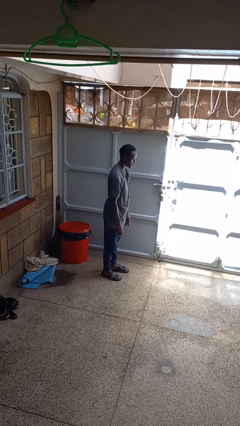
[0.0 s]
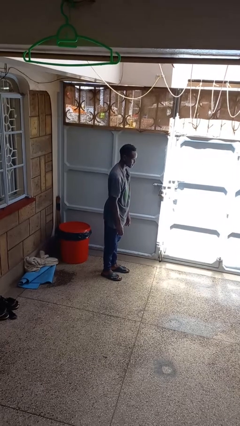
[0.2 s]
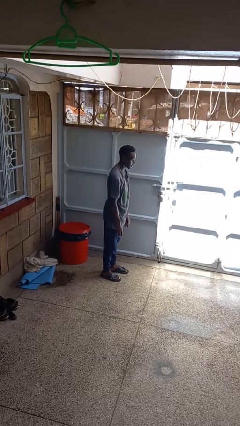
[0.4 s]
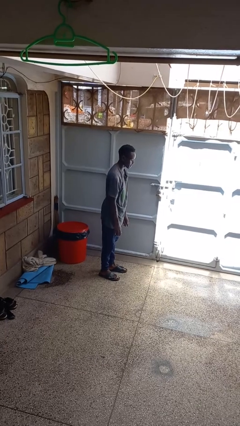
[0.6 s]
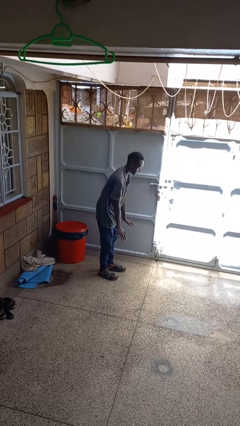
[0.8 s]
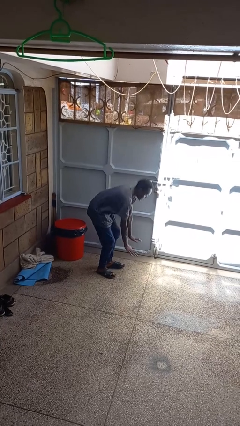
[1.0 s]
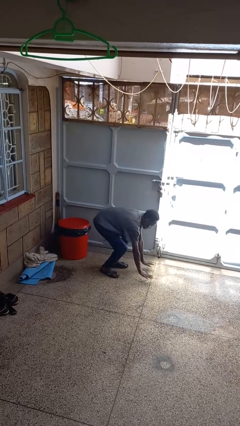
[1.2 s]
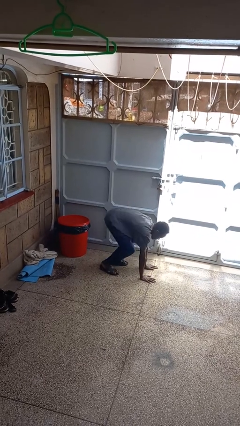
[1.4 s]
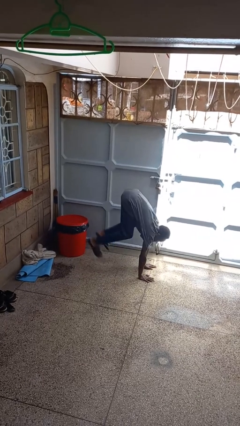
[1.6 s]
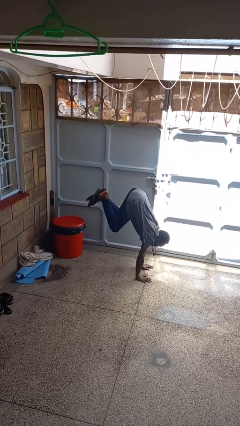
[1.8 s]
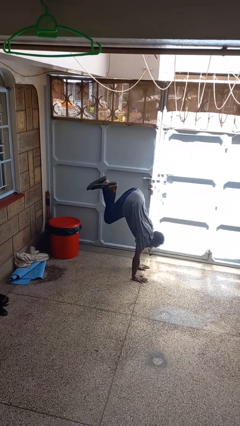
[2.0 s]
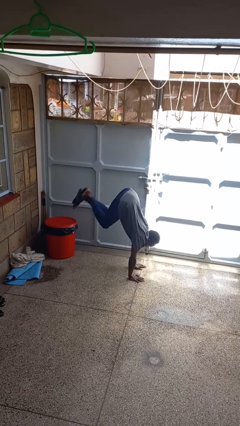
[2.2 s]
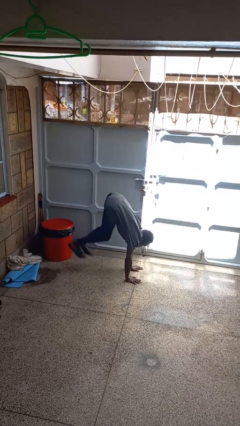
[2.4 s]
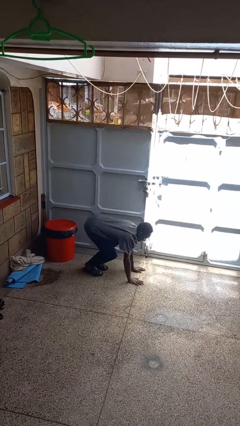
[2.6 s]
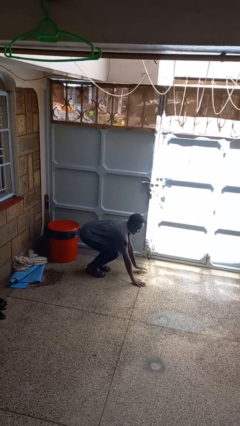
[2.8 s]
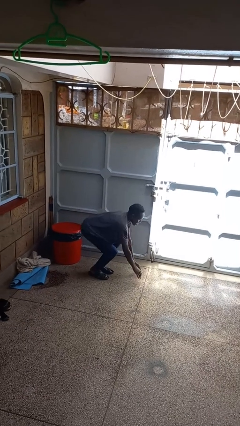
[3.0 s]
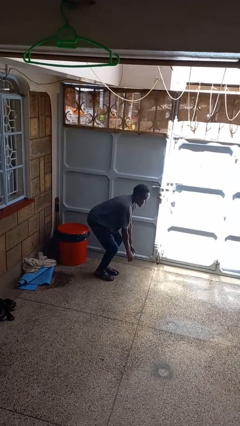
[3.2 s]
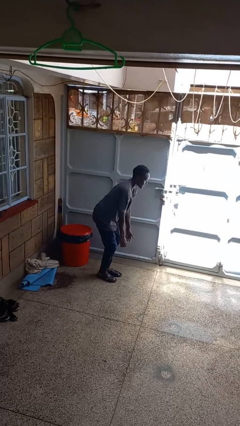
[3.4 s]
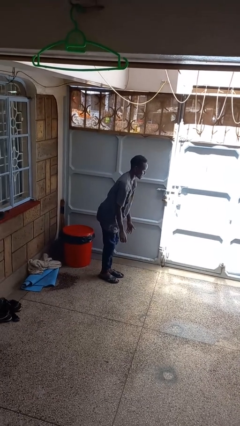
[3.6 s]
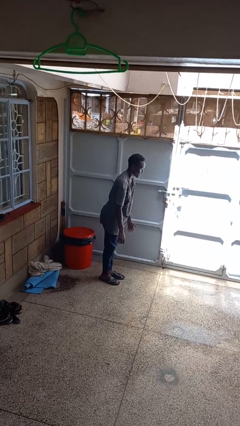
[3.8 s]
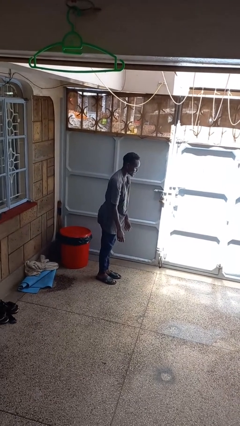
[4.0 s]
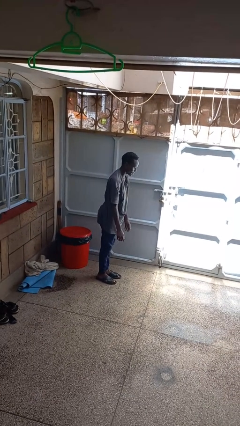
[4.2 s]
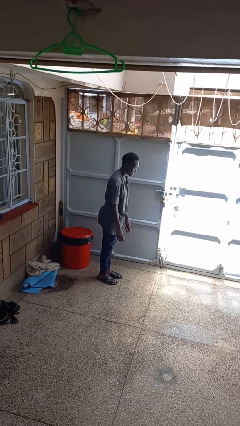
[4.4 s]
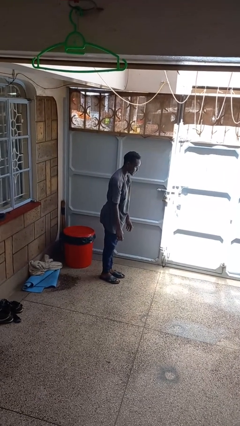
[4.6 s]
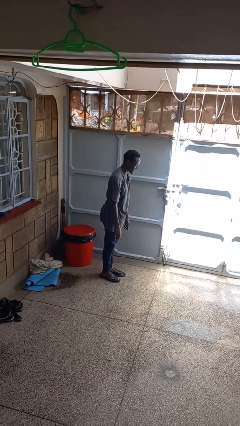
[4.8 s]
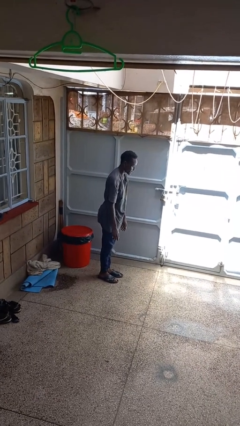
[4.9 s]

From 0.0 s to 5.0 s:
person handstand

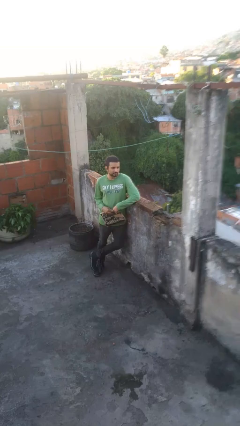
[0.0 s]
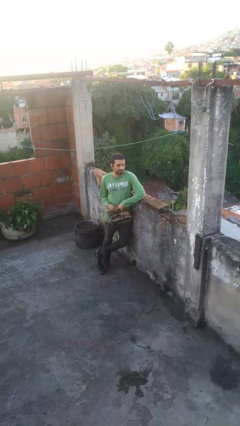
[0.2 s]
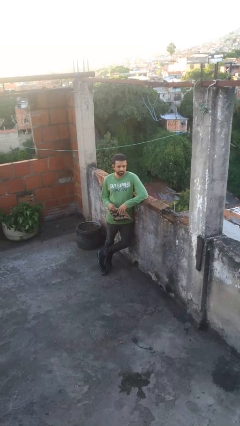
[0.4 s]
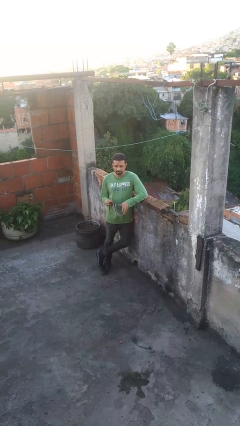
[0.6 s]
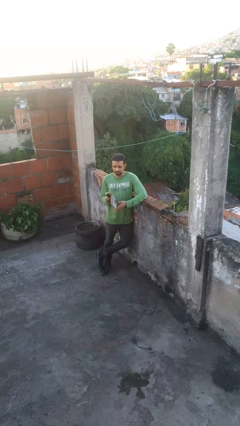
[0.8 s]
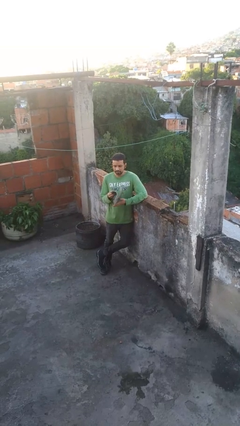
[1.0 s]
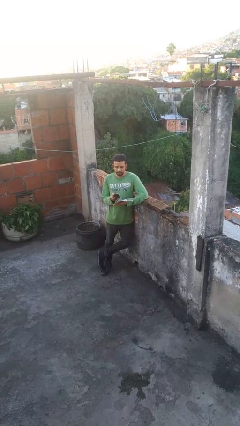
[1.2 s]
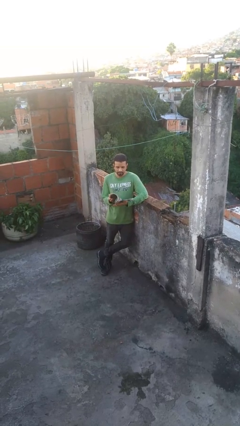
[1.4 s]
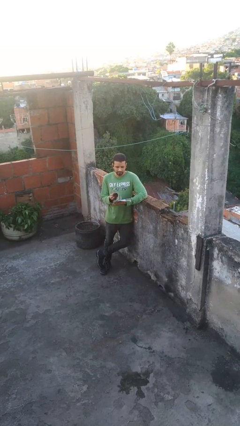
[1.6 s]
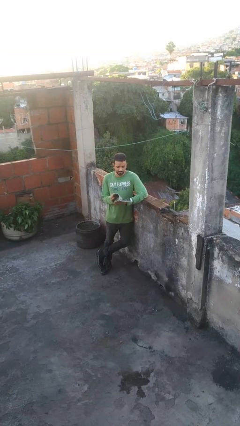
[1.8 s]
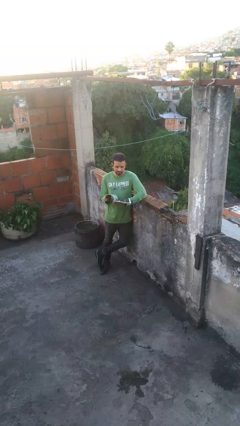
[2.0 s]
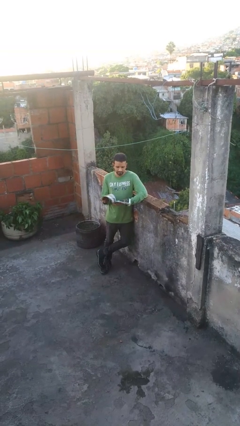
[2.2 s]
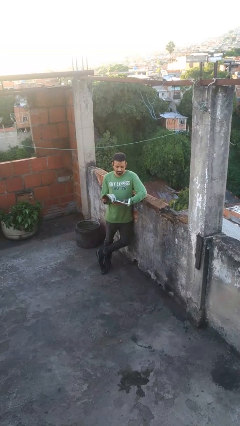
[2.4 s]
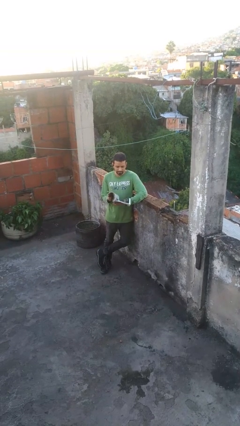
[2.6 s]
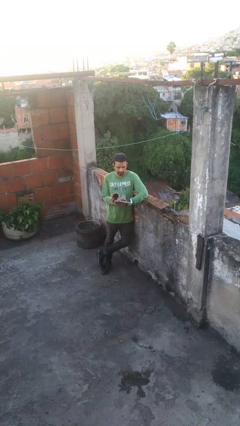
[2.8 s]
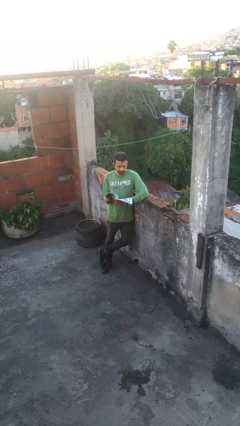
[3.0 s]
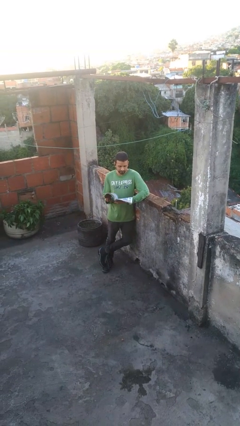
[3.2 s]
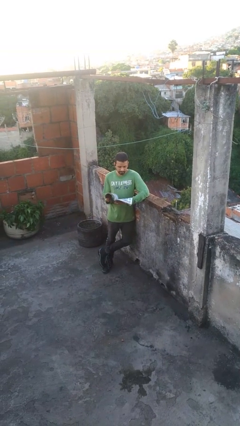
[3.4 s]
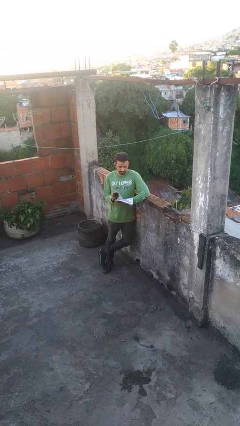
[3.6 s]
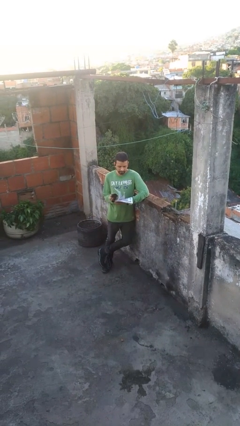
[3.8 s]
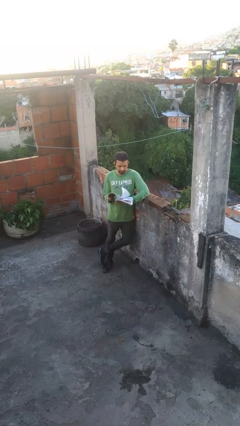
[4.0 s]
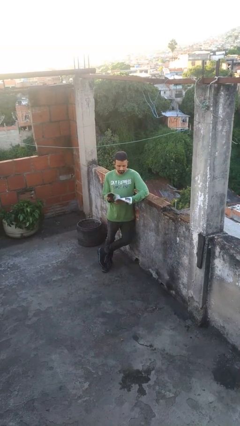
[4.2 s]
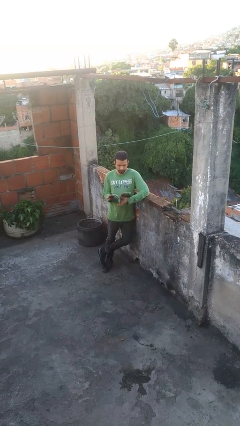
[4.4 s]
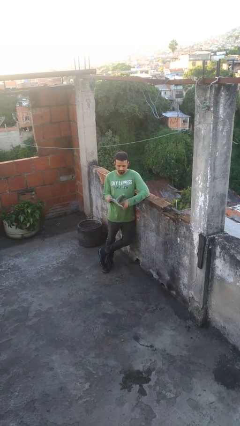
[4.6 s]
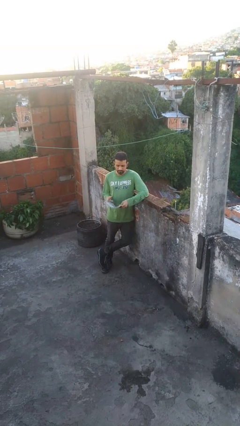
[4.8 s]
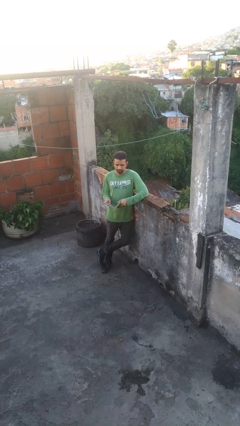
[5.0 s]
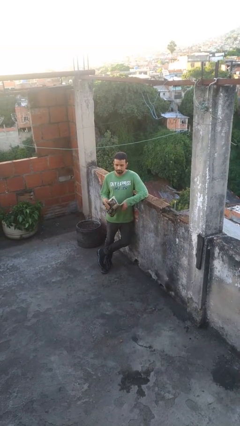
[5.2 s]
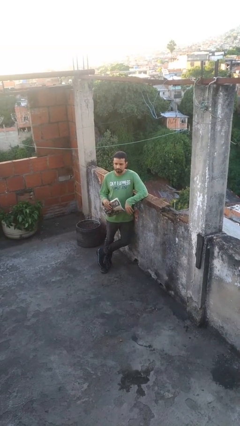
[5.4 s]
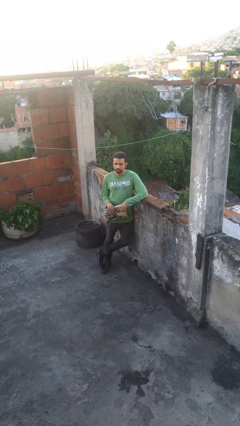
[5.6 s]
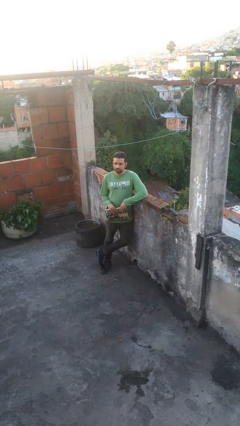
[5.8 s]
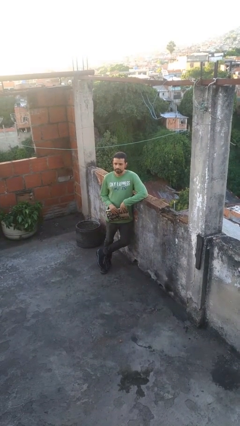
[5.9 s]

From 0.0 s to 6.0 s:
person reads magazine

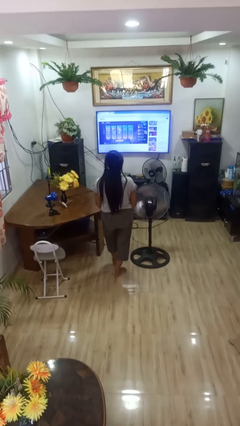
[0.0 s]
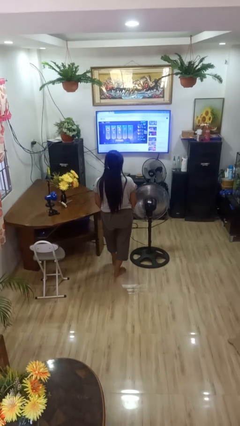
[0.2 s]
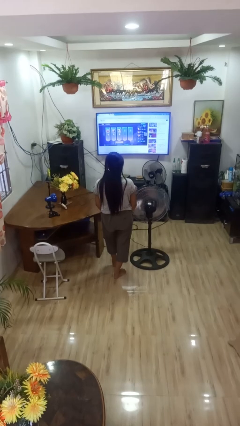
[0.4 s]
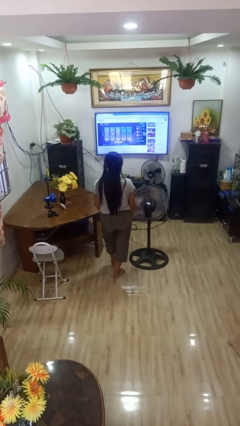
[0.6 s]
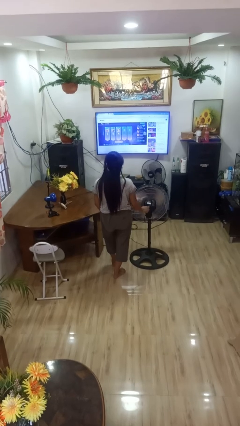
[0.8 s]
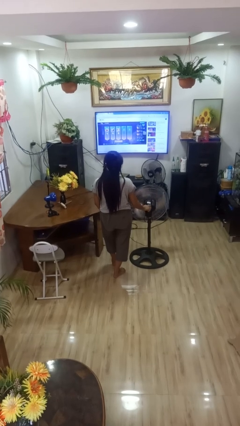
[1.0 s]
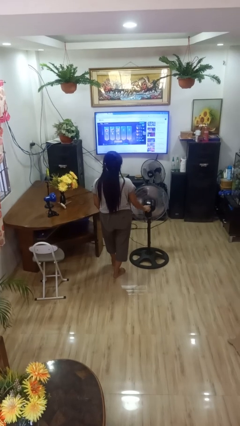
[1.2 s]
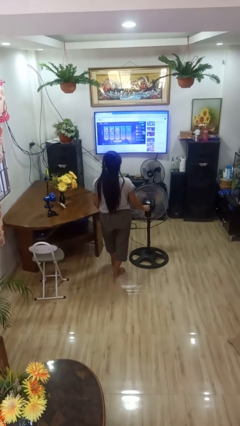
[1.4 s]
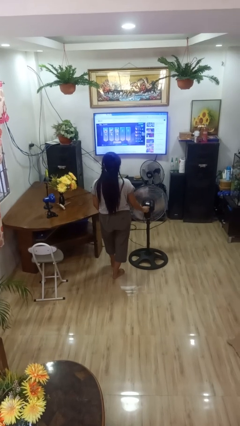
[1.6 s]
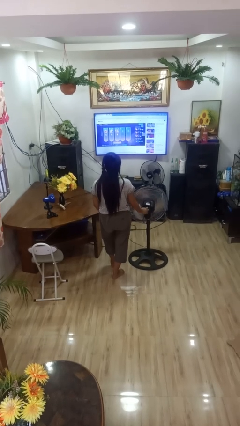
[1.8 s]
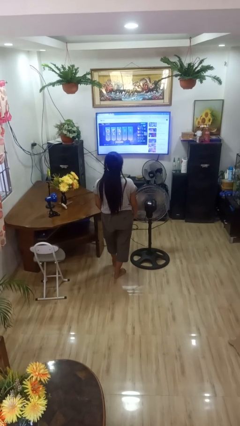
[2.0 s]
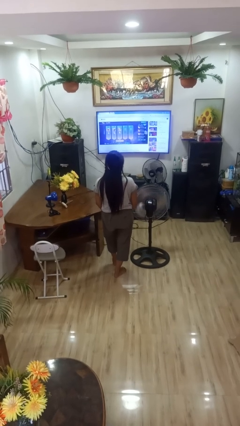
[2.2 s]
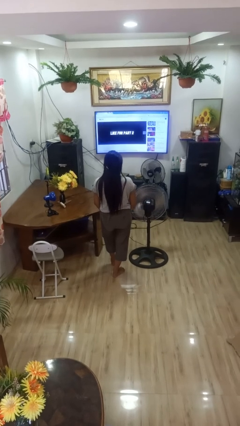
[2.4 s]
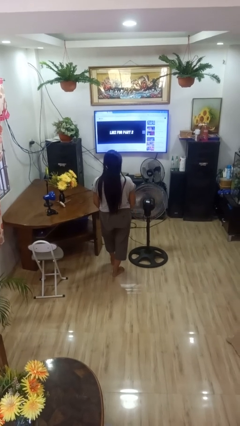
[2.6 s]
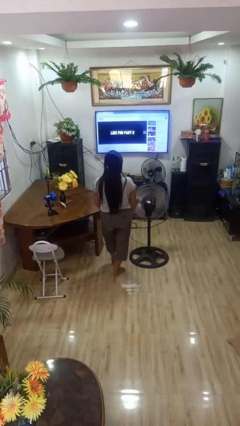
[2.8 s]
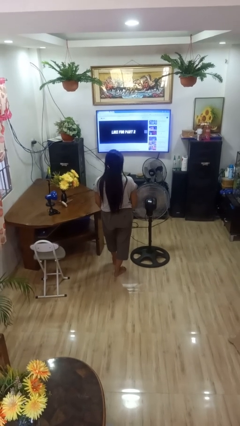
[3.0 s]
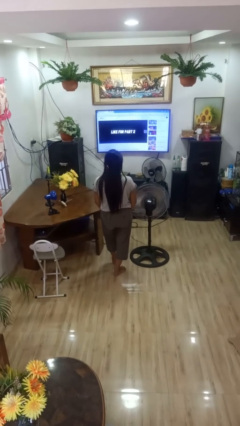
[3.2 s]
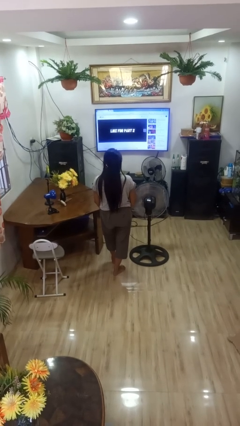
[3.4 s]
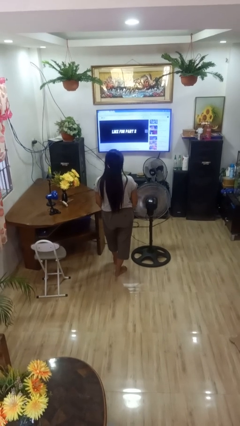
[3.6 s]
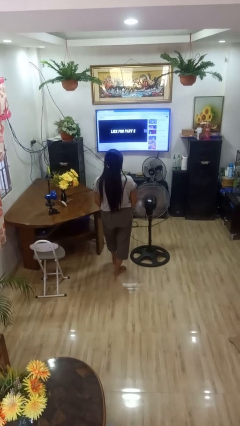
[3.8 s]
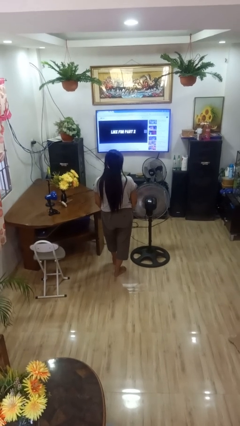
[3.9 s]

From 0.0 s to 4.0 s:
person turns on fan

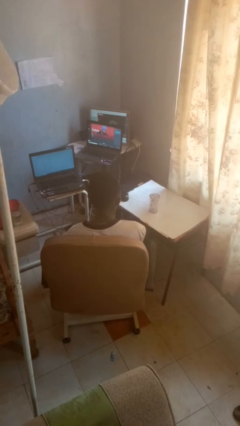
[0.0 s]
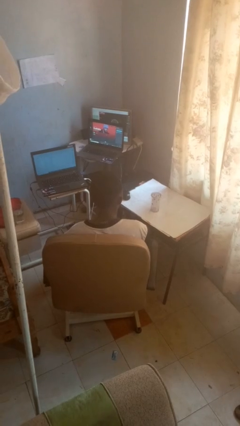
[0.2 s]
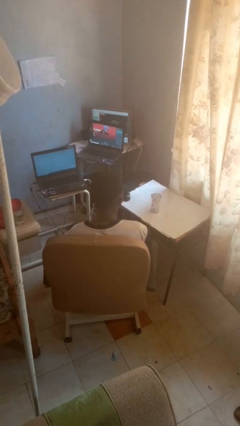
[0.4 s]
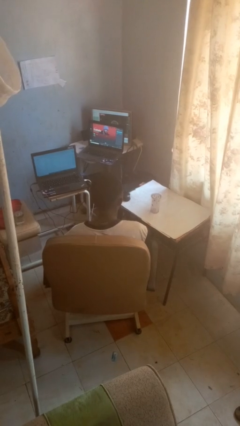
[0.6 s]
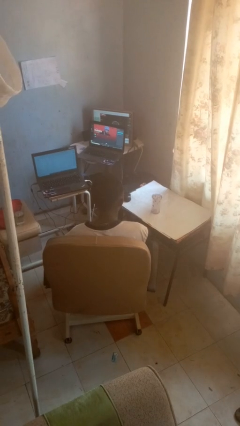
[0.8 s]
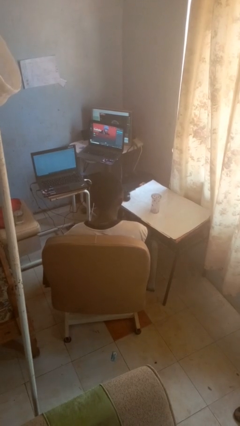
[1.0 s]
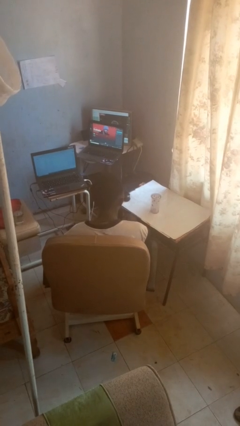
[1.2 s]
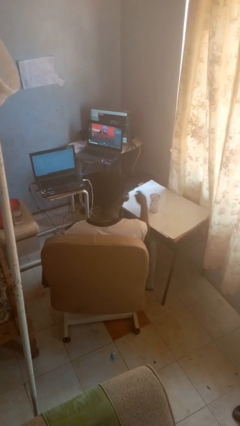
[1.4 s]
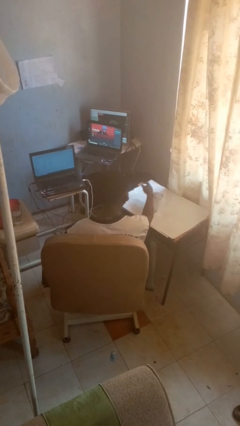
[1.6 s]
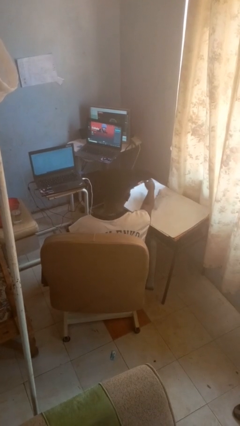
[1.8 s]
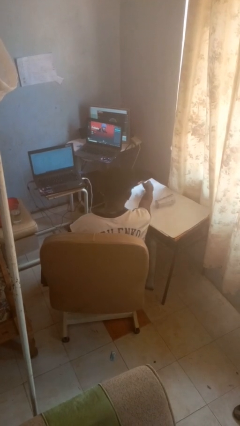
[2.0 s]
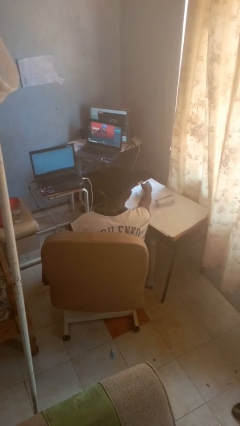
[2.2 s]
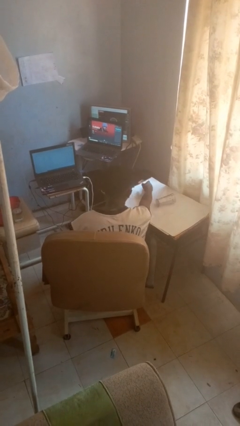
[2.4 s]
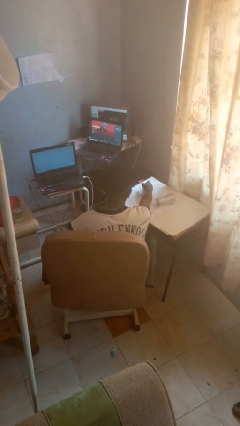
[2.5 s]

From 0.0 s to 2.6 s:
person knocks over glass
